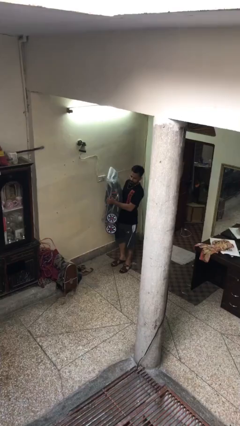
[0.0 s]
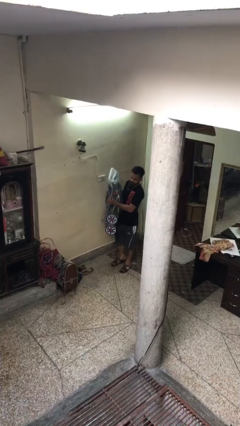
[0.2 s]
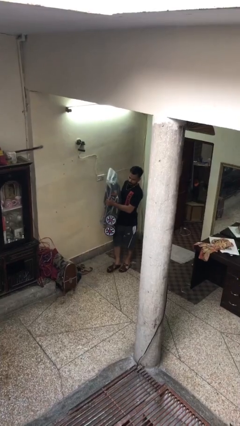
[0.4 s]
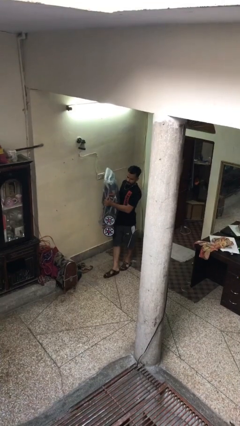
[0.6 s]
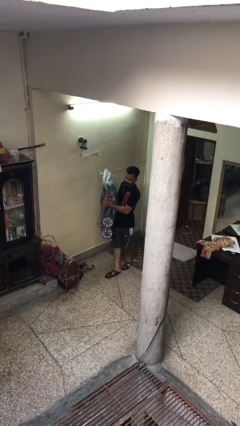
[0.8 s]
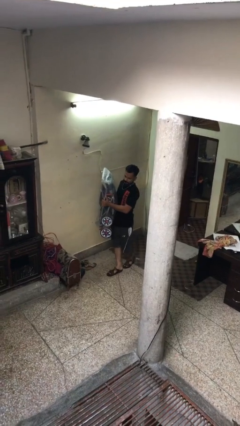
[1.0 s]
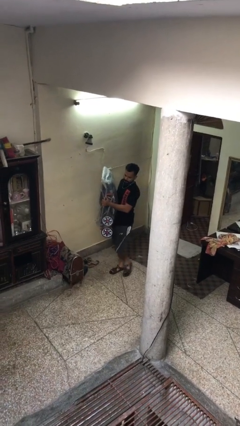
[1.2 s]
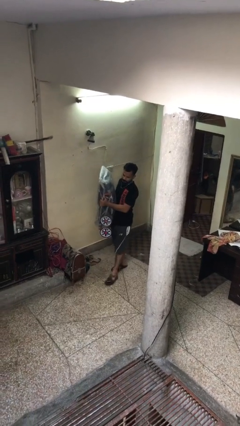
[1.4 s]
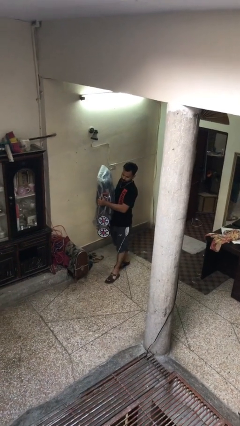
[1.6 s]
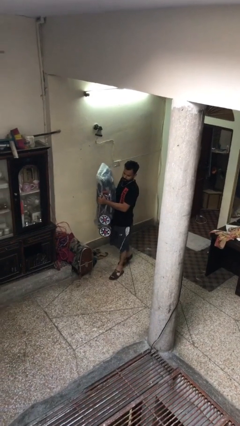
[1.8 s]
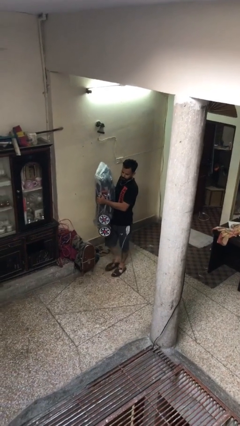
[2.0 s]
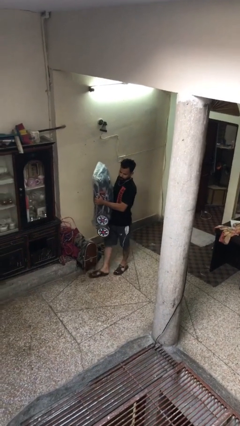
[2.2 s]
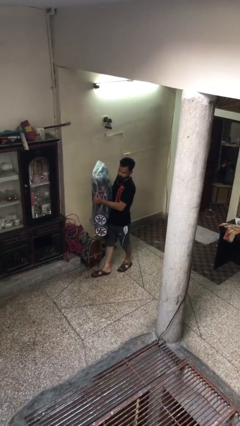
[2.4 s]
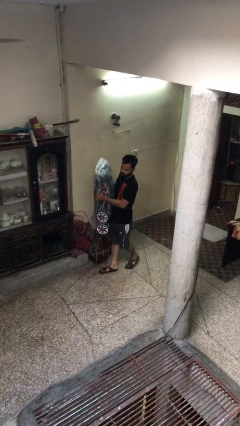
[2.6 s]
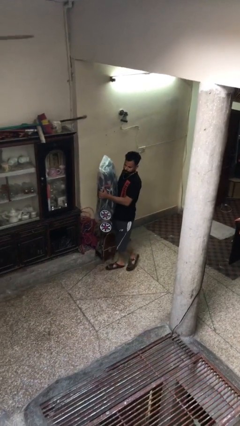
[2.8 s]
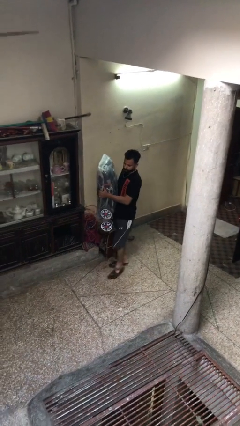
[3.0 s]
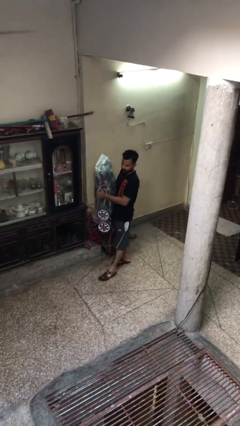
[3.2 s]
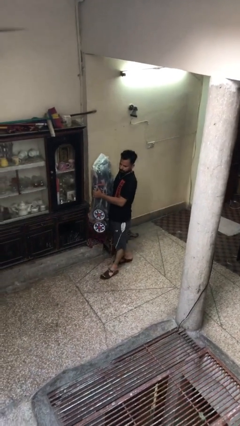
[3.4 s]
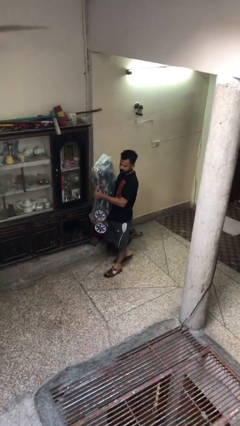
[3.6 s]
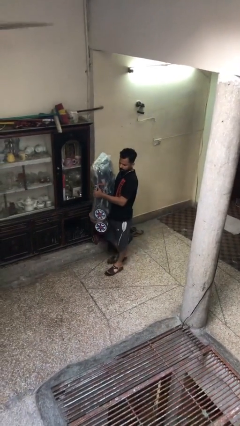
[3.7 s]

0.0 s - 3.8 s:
person carries heavy object

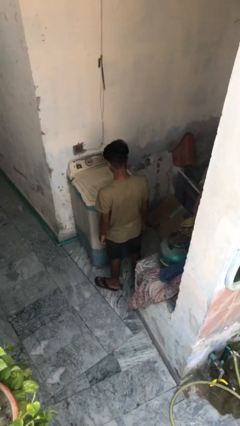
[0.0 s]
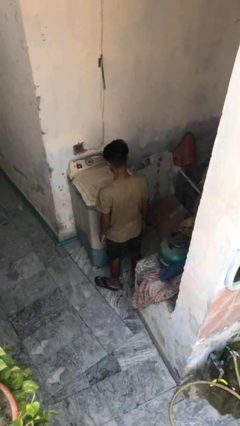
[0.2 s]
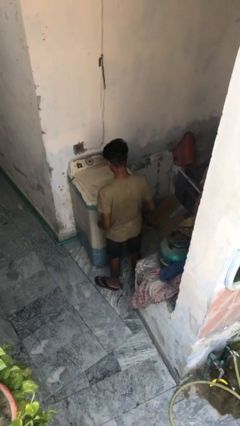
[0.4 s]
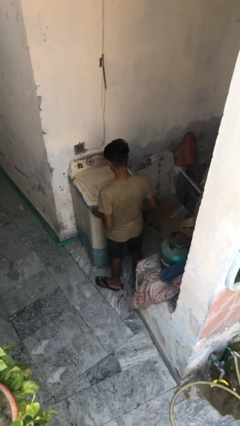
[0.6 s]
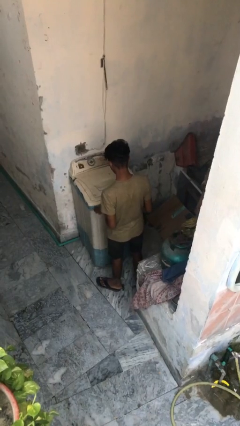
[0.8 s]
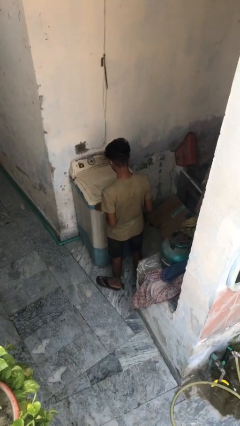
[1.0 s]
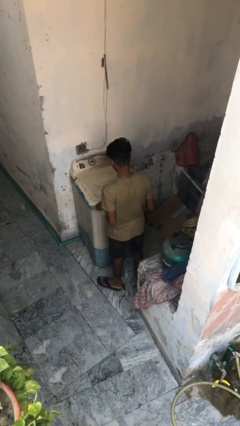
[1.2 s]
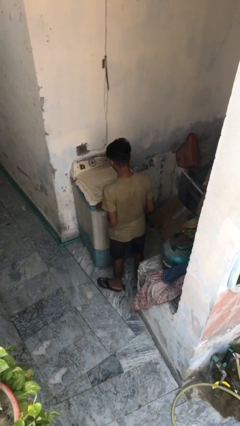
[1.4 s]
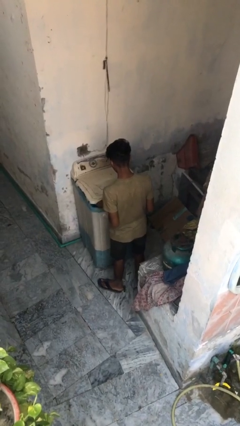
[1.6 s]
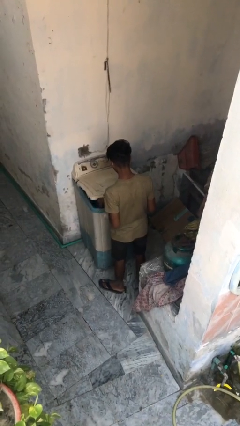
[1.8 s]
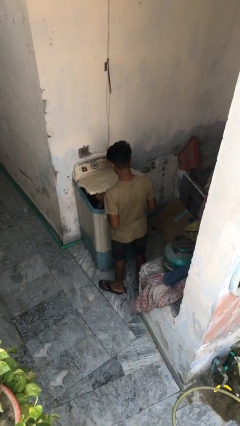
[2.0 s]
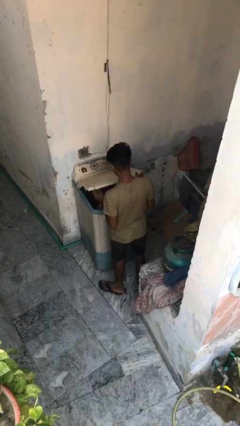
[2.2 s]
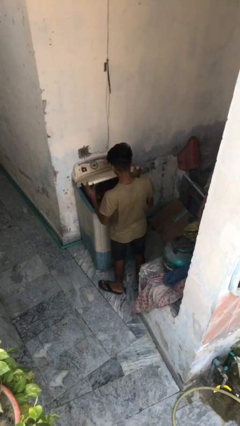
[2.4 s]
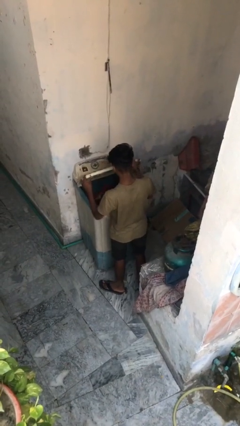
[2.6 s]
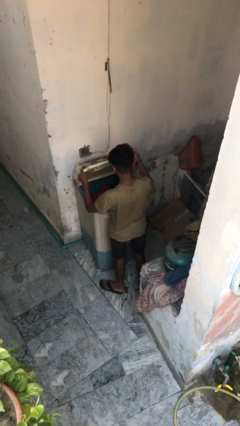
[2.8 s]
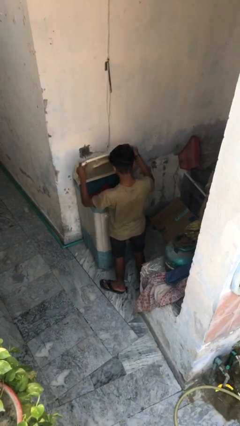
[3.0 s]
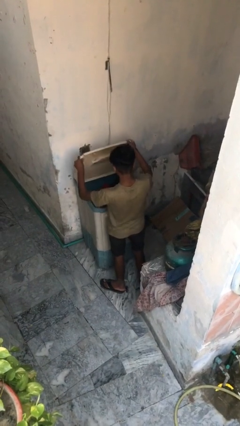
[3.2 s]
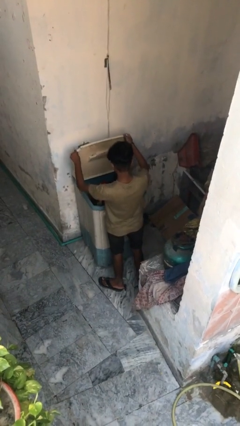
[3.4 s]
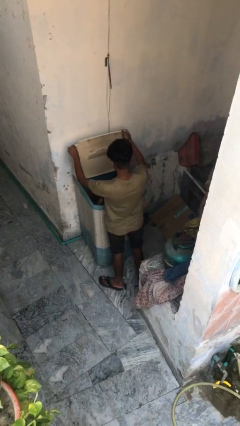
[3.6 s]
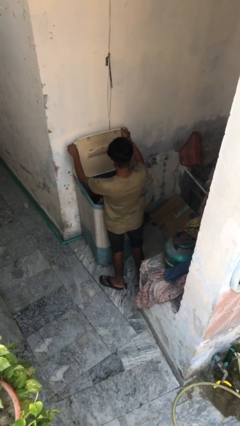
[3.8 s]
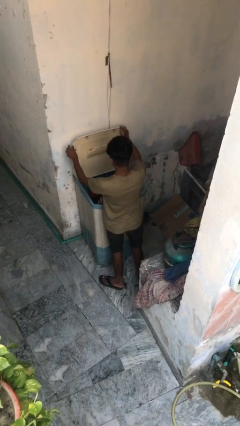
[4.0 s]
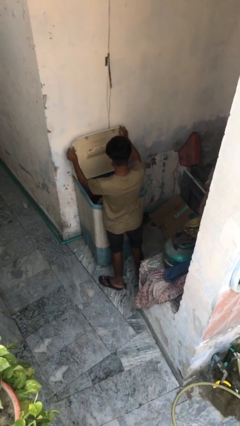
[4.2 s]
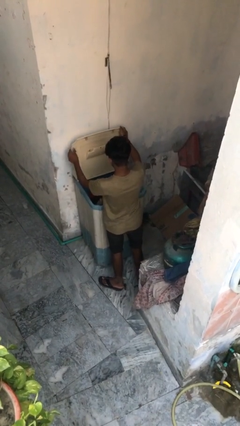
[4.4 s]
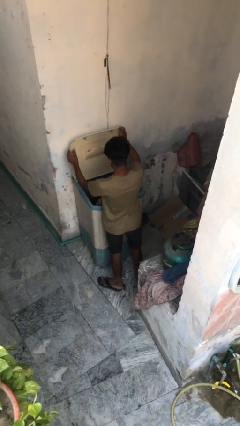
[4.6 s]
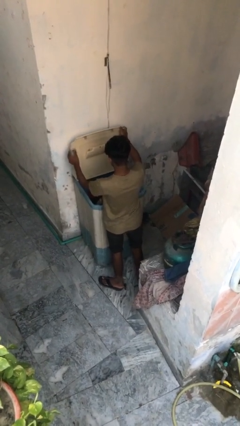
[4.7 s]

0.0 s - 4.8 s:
person opens clothes washer

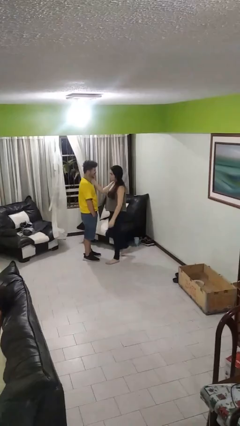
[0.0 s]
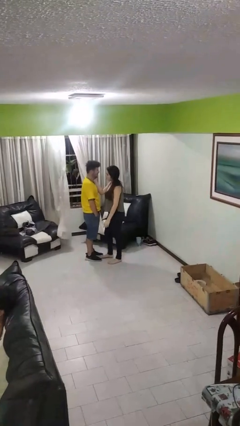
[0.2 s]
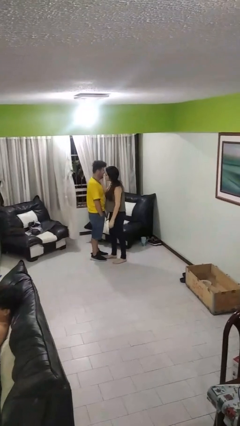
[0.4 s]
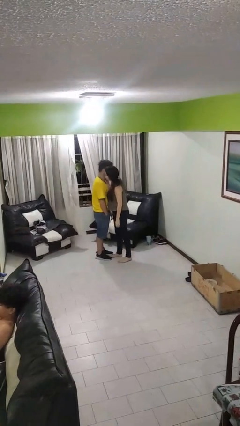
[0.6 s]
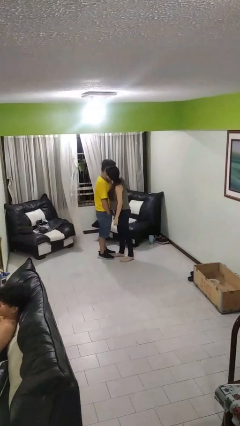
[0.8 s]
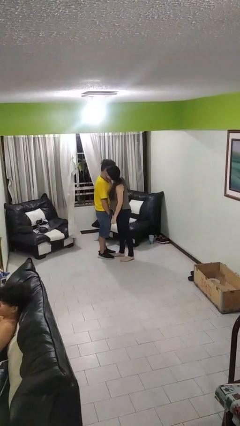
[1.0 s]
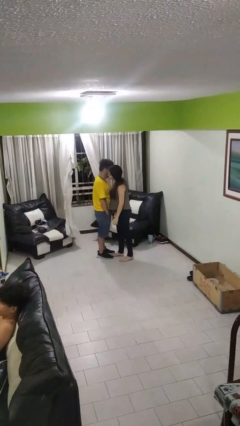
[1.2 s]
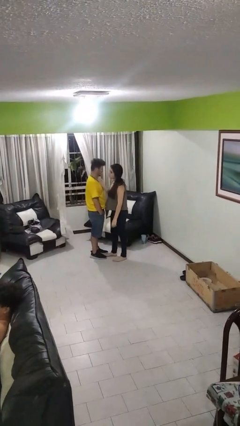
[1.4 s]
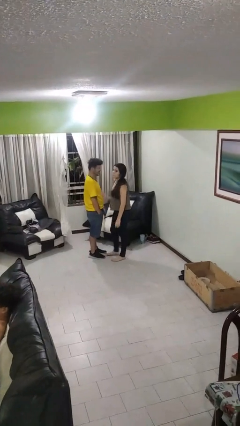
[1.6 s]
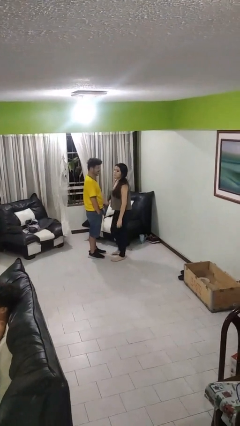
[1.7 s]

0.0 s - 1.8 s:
person kisses cheek of person

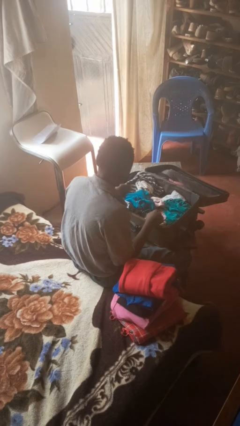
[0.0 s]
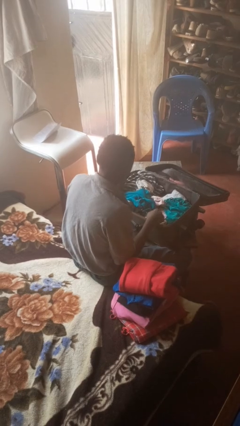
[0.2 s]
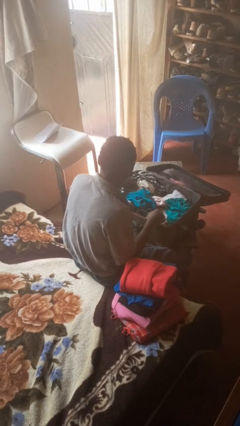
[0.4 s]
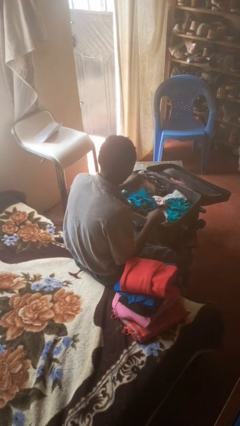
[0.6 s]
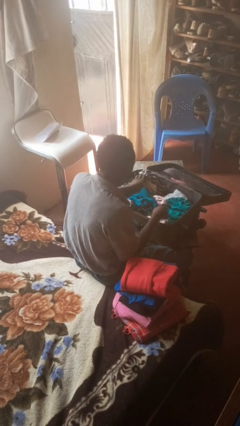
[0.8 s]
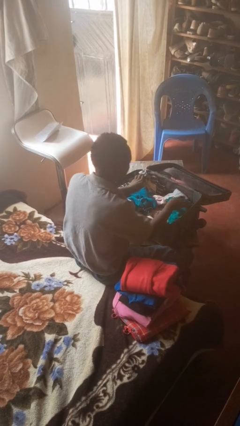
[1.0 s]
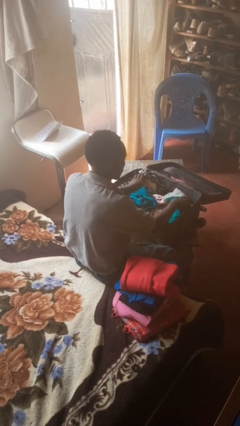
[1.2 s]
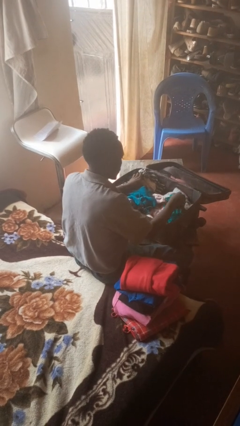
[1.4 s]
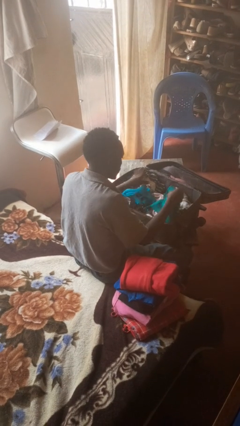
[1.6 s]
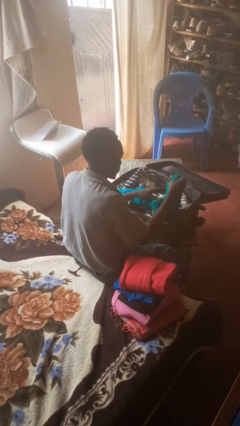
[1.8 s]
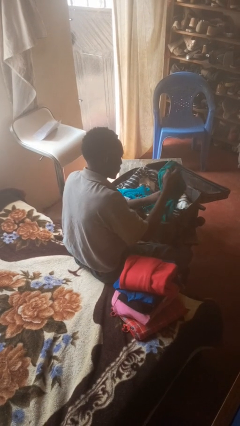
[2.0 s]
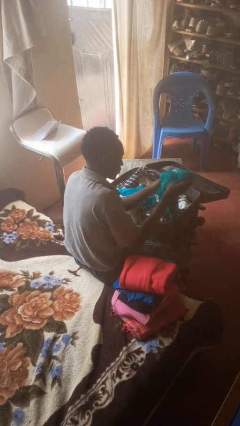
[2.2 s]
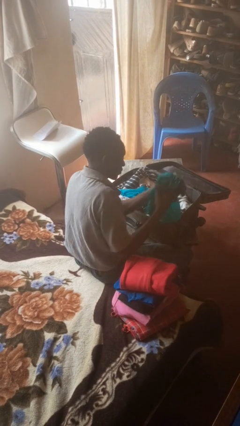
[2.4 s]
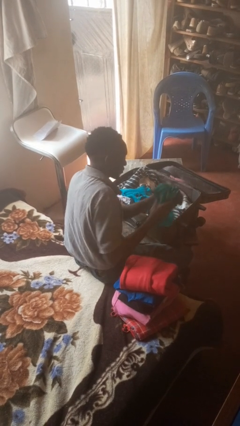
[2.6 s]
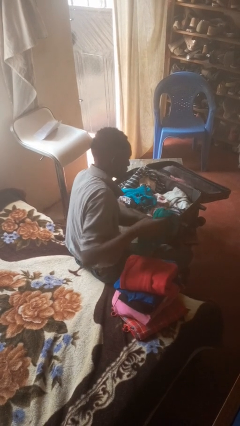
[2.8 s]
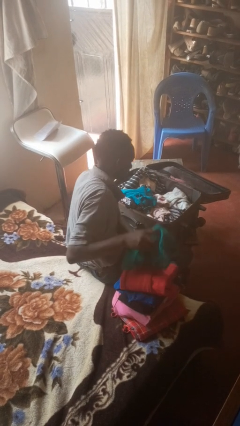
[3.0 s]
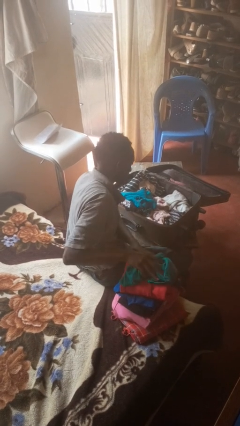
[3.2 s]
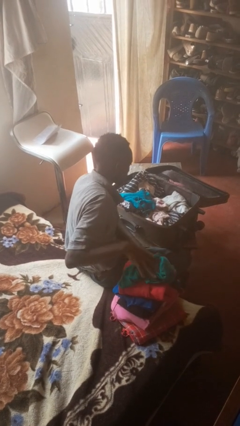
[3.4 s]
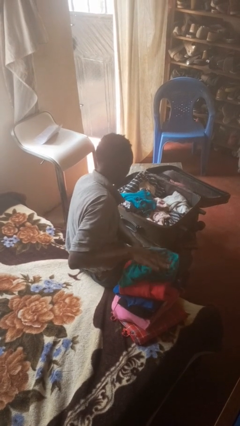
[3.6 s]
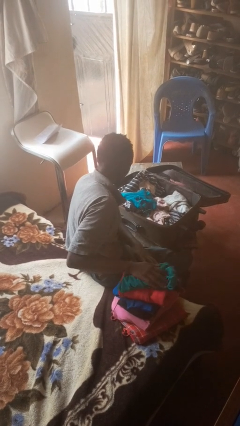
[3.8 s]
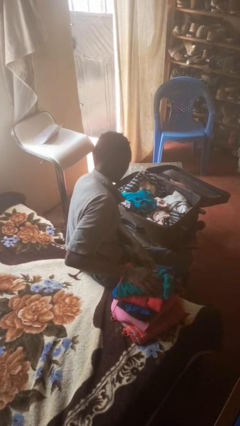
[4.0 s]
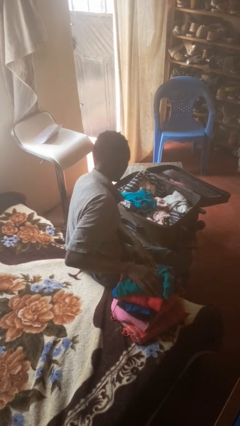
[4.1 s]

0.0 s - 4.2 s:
person unloads clothes from suitcase

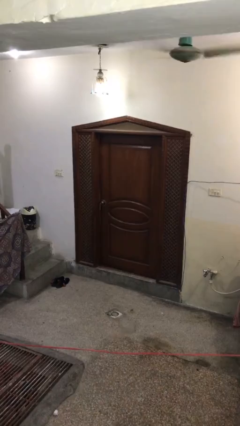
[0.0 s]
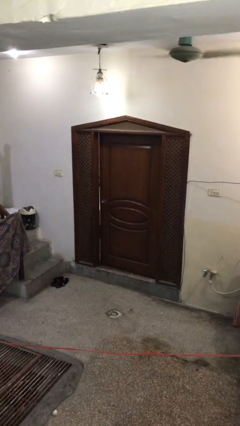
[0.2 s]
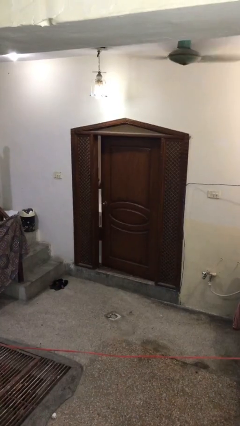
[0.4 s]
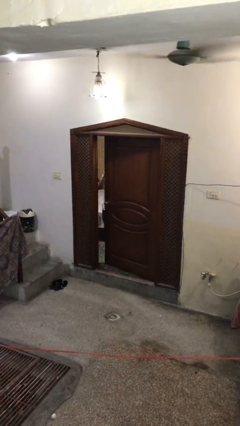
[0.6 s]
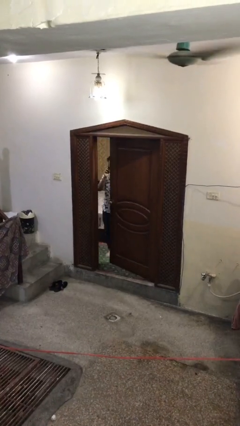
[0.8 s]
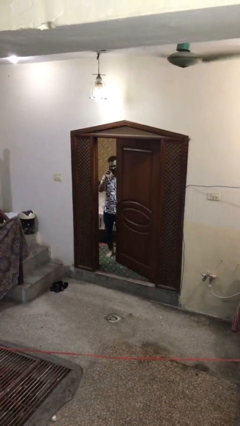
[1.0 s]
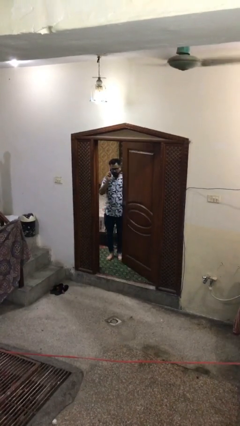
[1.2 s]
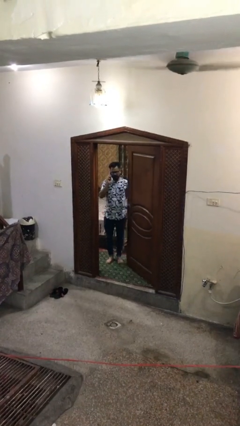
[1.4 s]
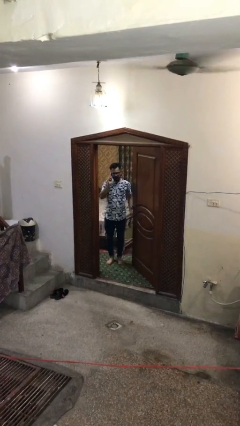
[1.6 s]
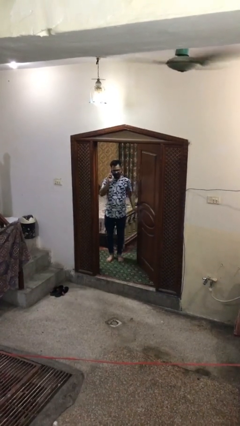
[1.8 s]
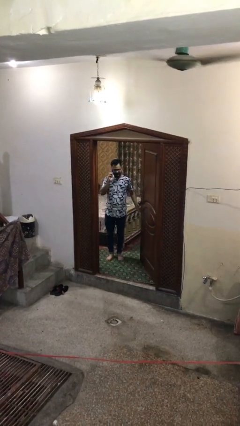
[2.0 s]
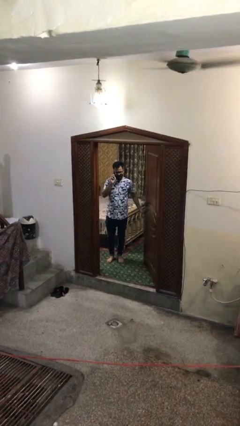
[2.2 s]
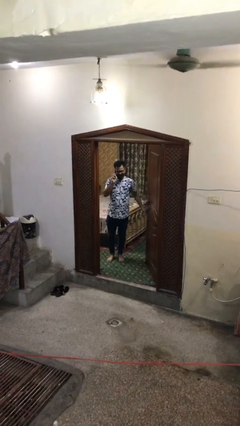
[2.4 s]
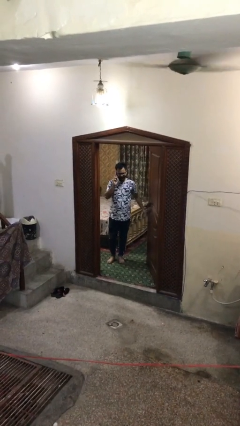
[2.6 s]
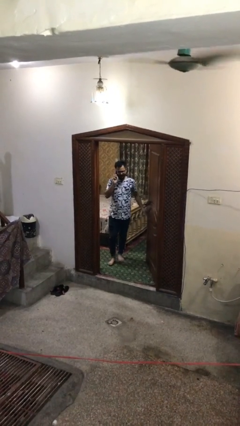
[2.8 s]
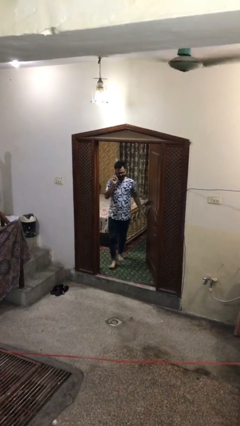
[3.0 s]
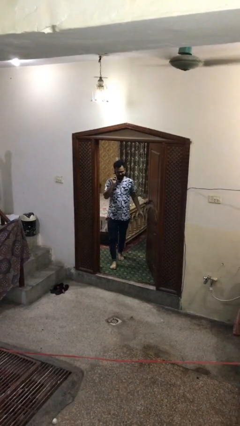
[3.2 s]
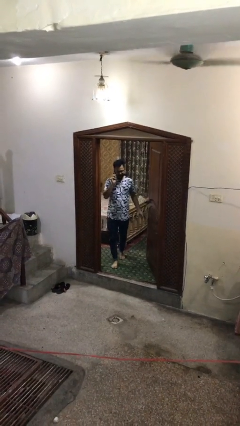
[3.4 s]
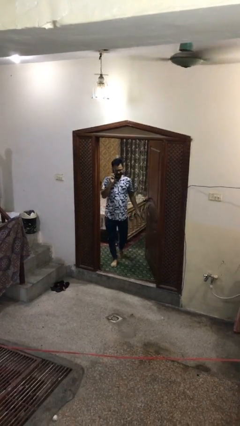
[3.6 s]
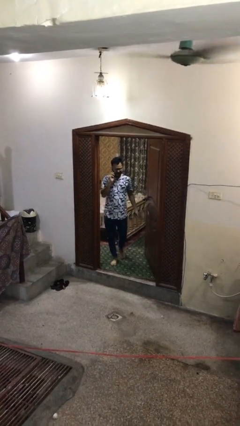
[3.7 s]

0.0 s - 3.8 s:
person opens facility door
